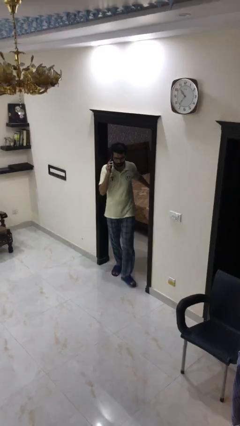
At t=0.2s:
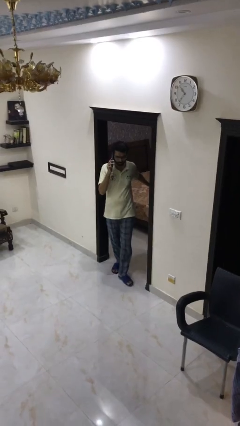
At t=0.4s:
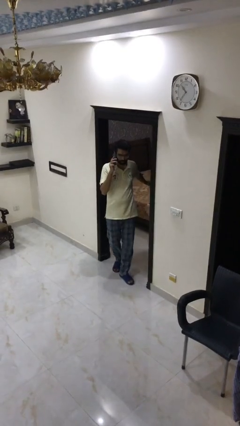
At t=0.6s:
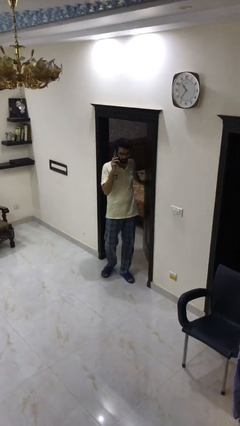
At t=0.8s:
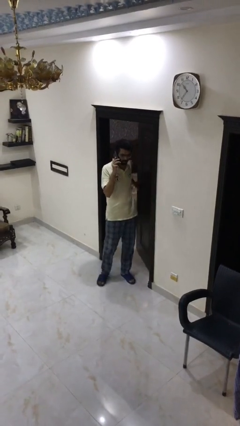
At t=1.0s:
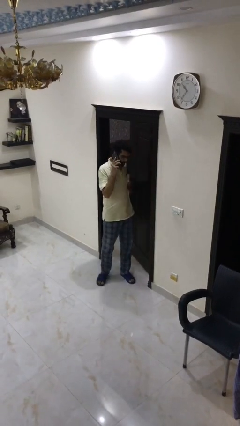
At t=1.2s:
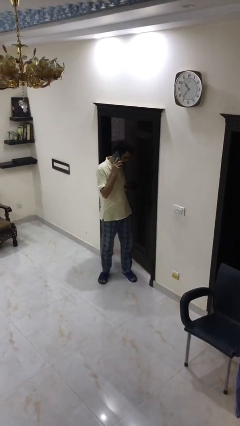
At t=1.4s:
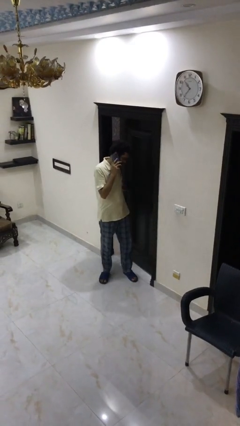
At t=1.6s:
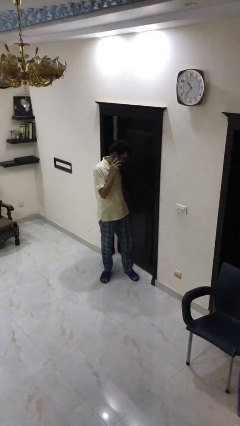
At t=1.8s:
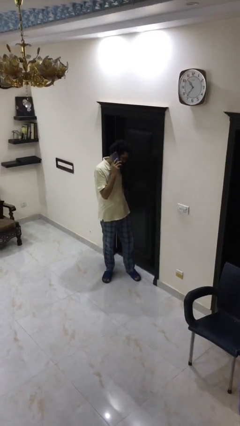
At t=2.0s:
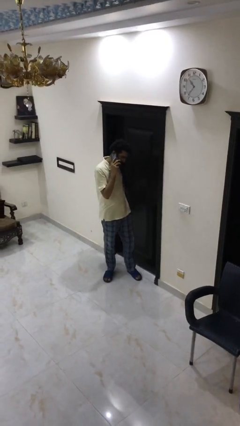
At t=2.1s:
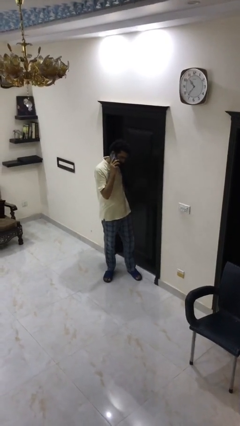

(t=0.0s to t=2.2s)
person closes facility door

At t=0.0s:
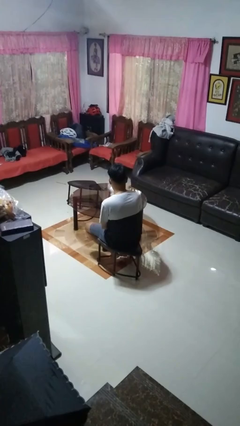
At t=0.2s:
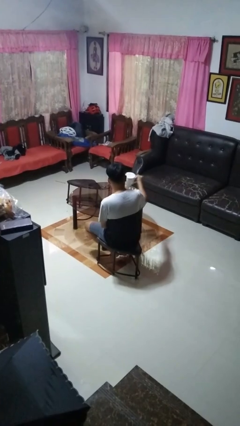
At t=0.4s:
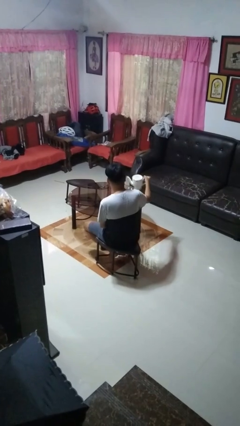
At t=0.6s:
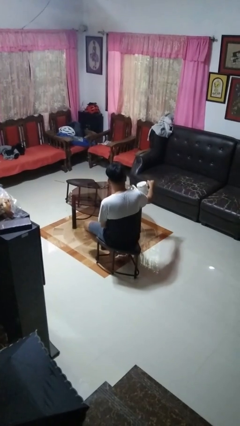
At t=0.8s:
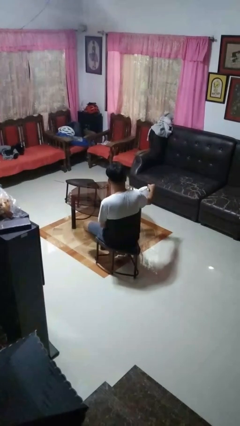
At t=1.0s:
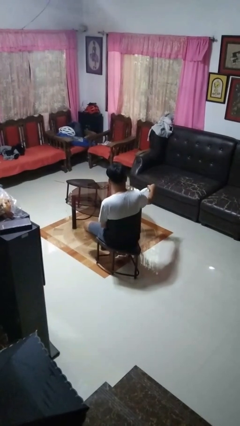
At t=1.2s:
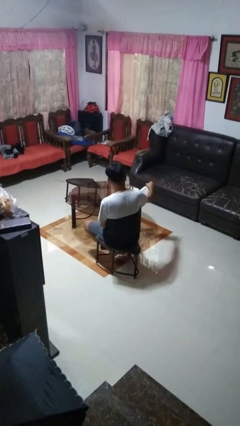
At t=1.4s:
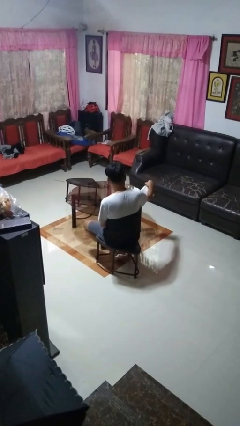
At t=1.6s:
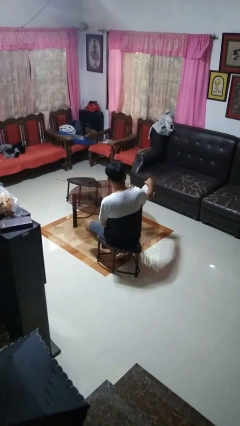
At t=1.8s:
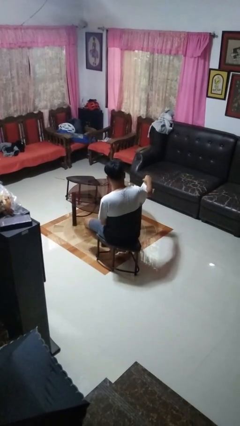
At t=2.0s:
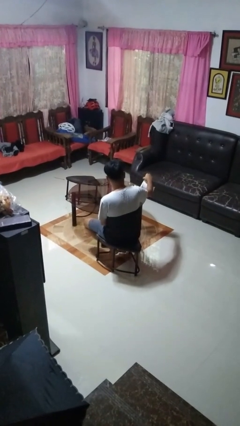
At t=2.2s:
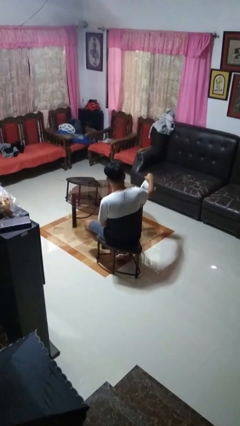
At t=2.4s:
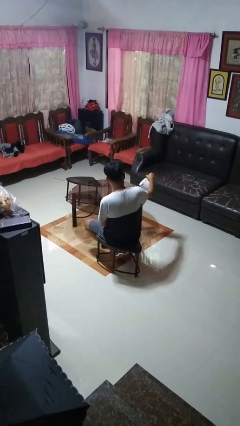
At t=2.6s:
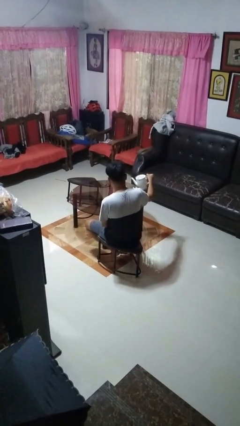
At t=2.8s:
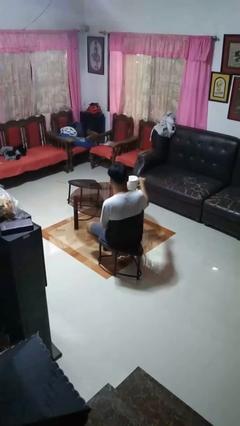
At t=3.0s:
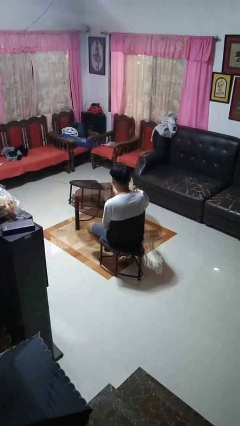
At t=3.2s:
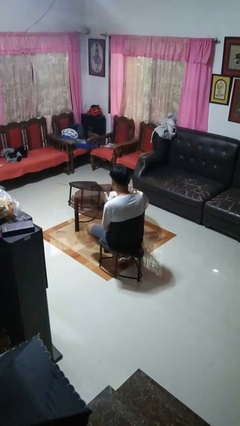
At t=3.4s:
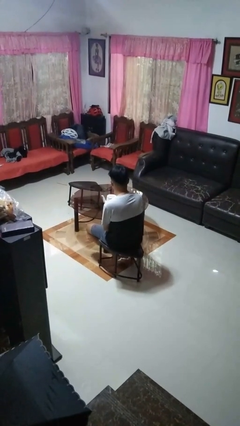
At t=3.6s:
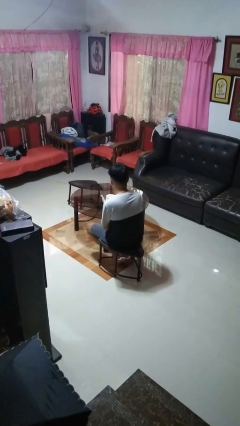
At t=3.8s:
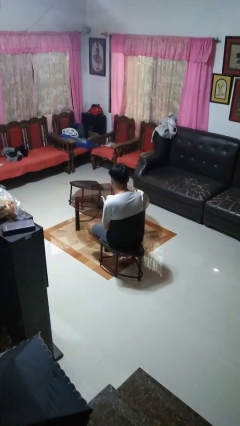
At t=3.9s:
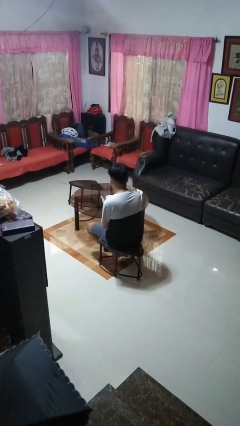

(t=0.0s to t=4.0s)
person pours coffee into mug

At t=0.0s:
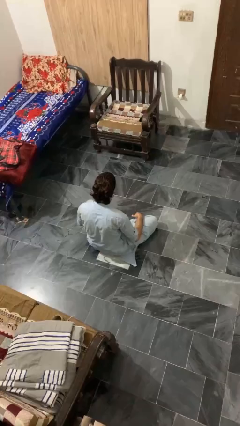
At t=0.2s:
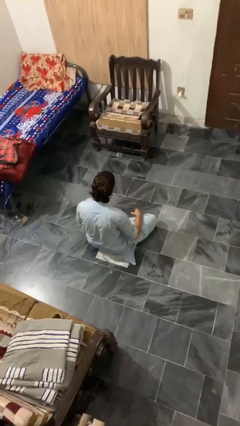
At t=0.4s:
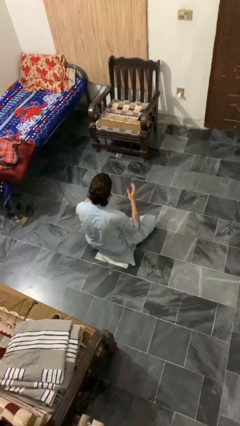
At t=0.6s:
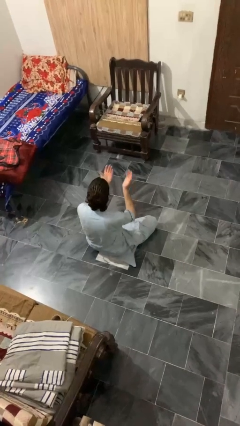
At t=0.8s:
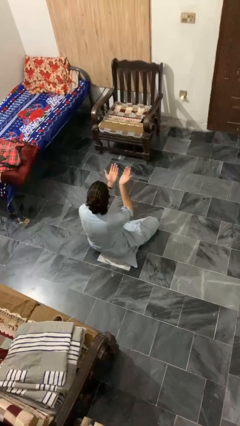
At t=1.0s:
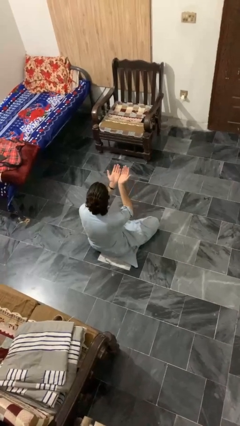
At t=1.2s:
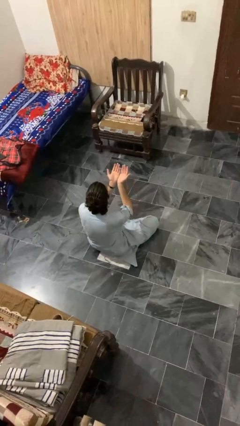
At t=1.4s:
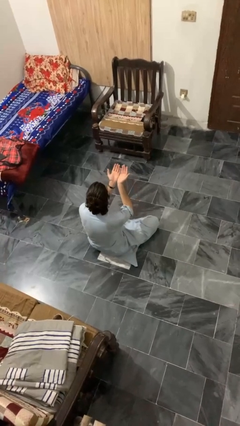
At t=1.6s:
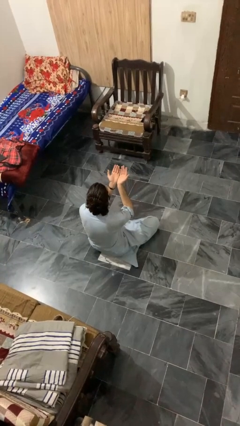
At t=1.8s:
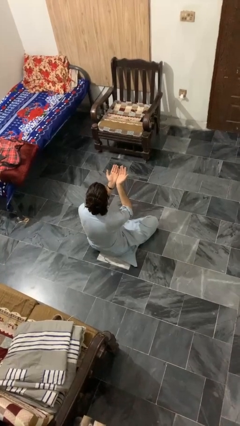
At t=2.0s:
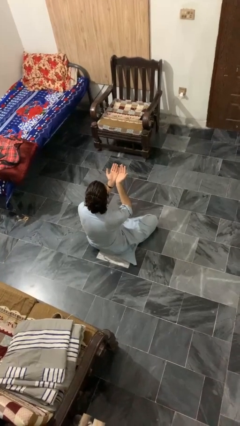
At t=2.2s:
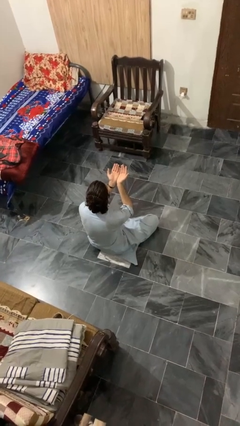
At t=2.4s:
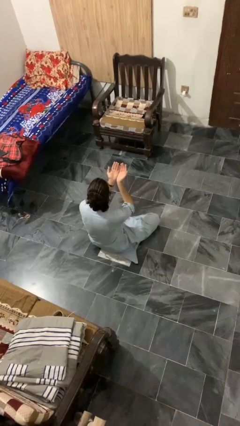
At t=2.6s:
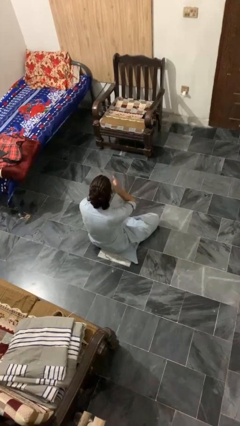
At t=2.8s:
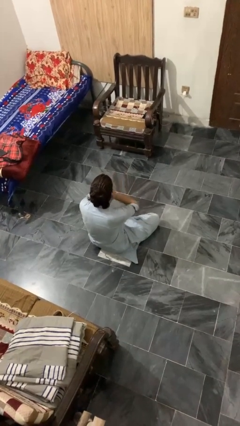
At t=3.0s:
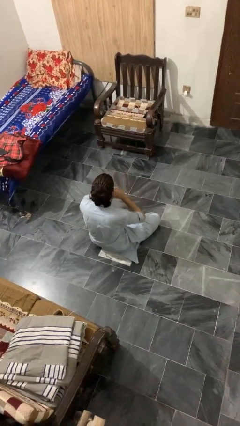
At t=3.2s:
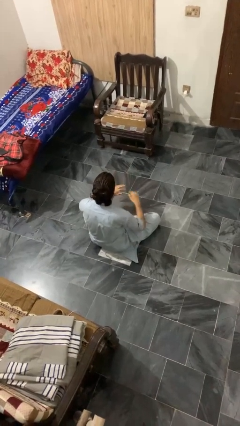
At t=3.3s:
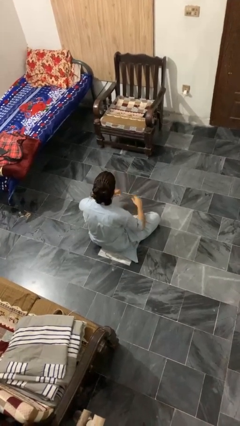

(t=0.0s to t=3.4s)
person prays

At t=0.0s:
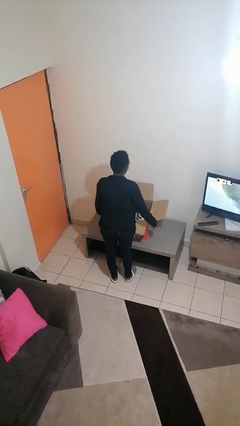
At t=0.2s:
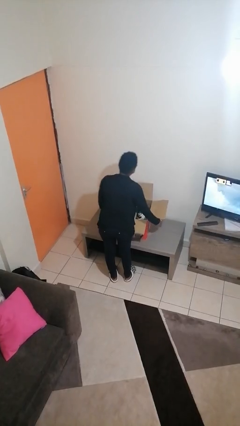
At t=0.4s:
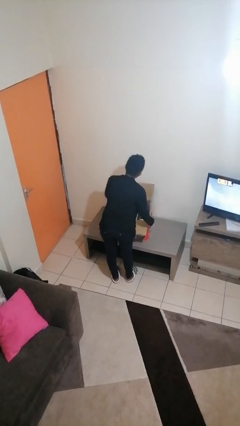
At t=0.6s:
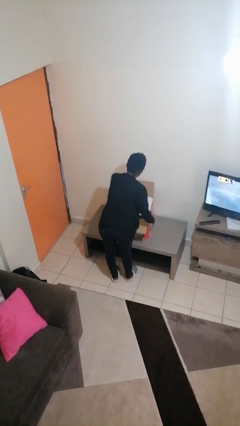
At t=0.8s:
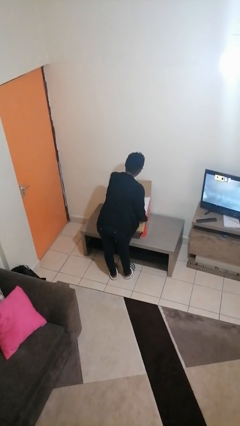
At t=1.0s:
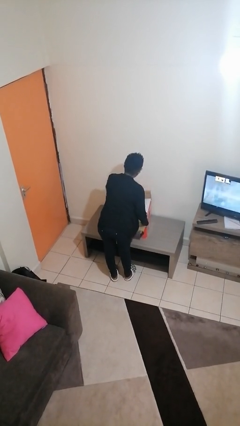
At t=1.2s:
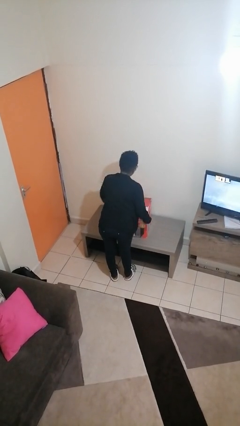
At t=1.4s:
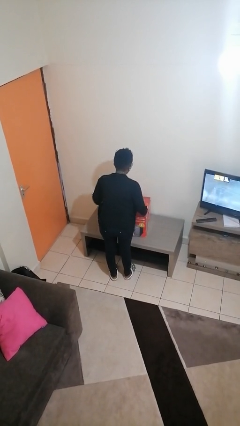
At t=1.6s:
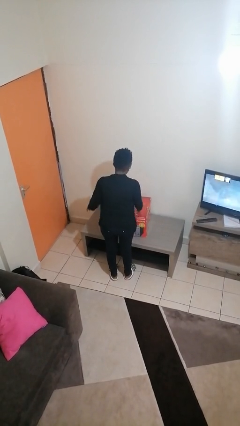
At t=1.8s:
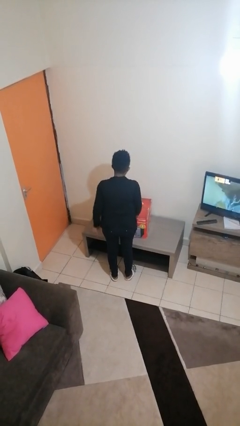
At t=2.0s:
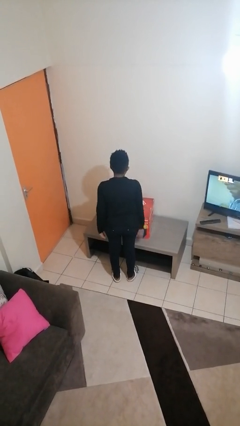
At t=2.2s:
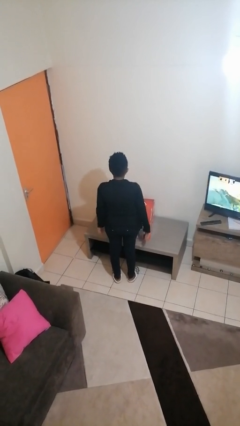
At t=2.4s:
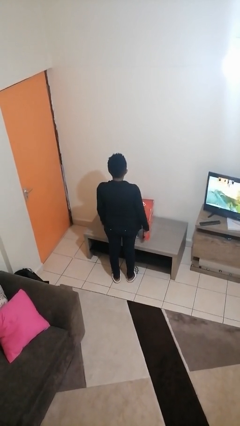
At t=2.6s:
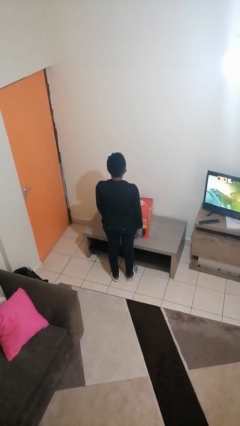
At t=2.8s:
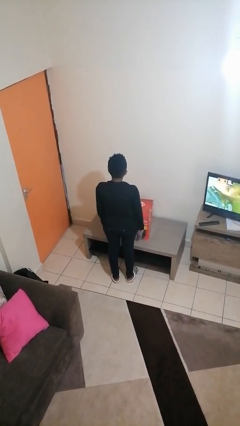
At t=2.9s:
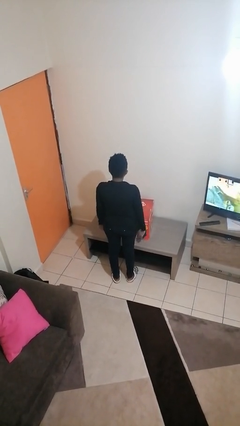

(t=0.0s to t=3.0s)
person closes box

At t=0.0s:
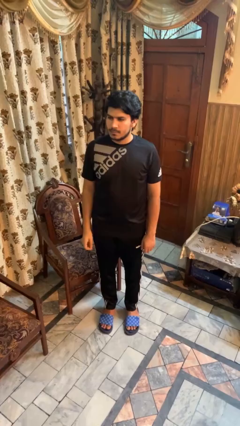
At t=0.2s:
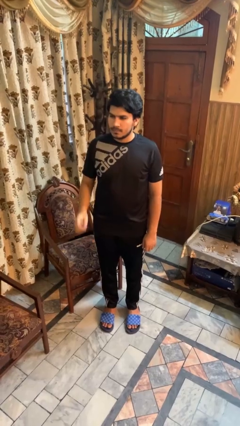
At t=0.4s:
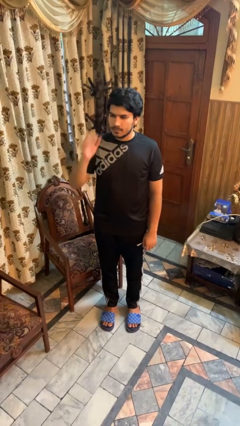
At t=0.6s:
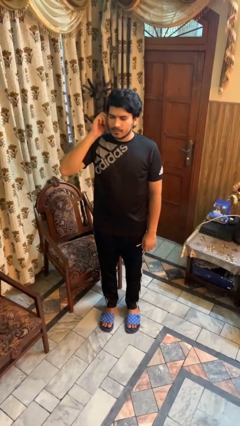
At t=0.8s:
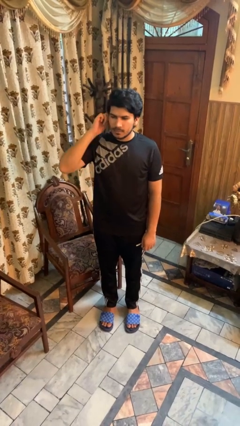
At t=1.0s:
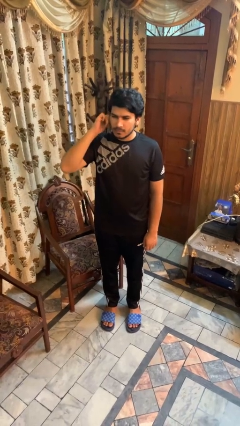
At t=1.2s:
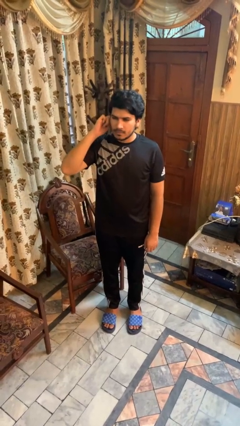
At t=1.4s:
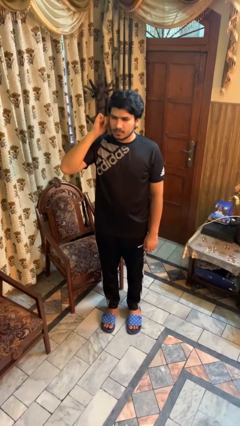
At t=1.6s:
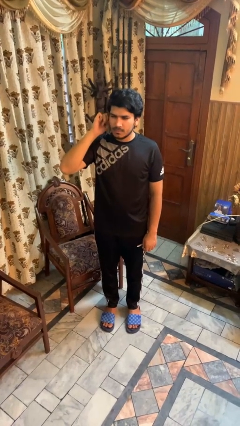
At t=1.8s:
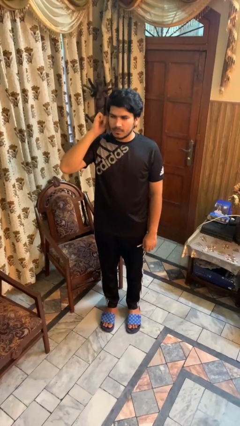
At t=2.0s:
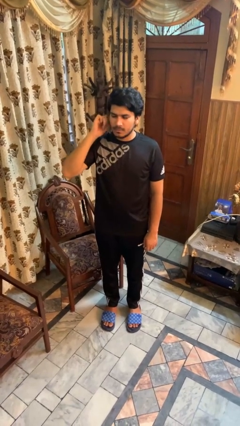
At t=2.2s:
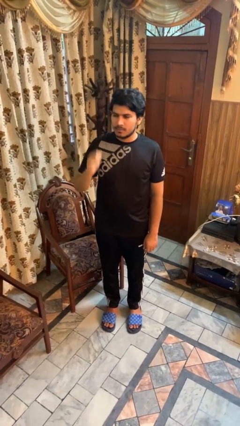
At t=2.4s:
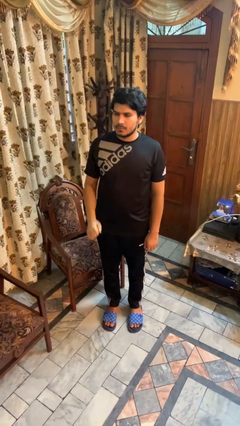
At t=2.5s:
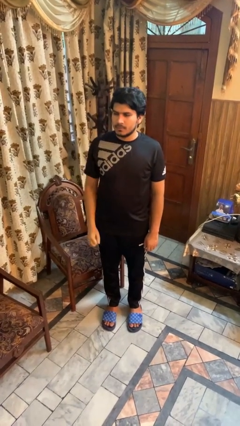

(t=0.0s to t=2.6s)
person touches earlobe

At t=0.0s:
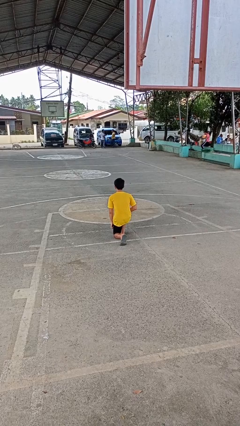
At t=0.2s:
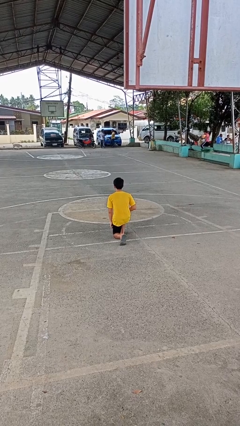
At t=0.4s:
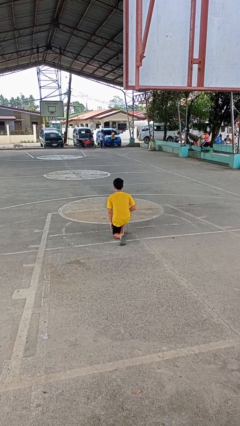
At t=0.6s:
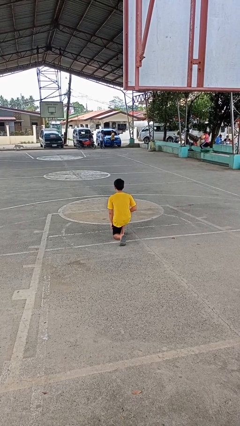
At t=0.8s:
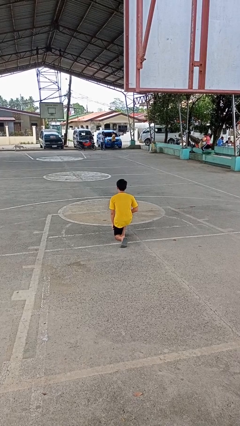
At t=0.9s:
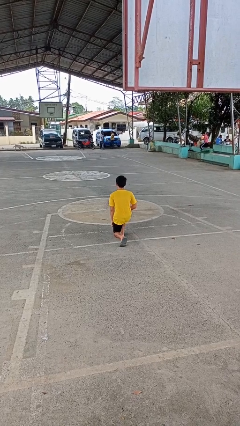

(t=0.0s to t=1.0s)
person kneels

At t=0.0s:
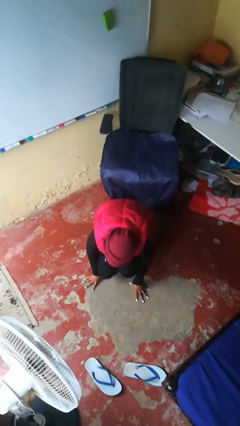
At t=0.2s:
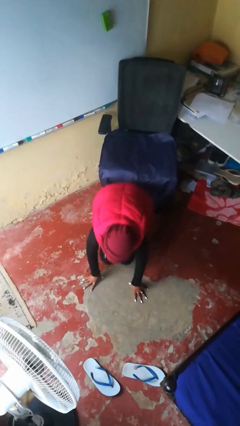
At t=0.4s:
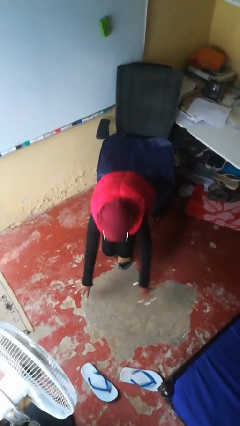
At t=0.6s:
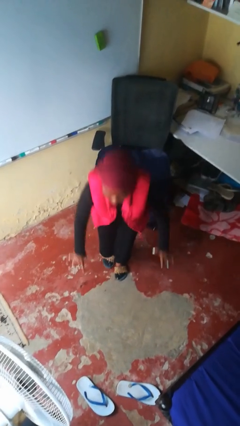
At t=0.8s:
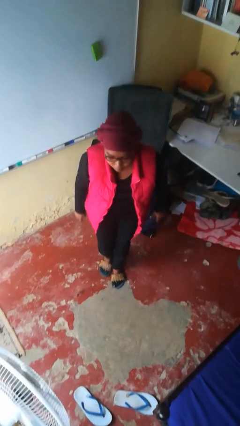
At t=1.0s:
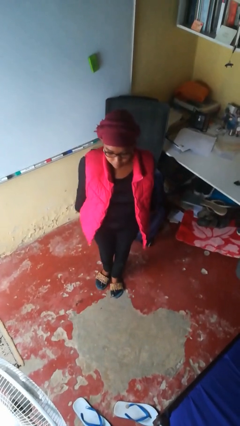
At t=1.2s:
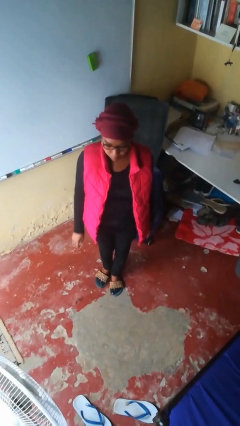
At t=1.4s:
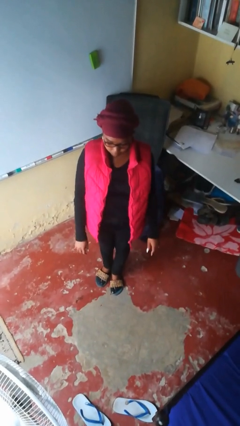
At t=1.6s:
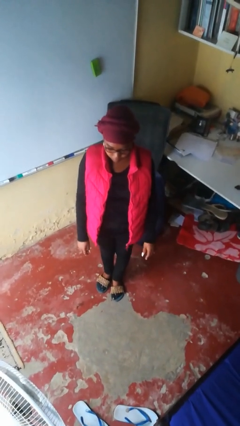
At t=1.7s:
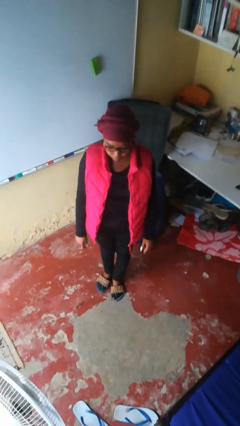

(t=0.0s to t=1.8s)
person stands up from floor
